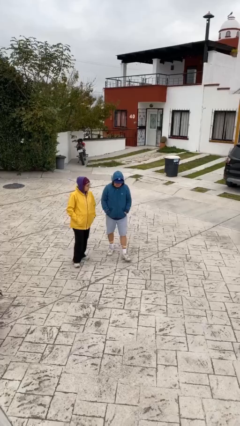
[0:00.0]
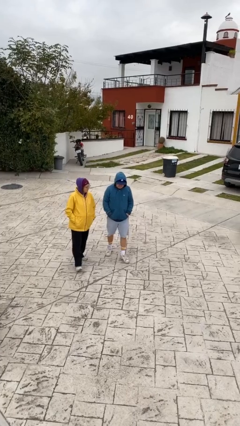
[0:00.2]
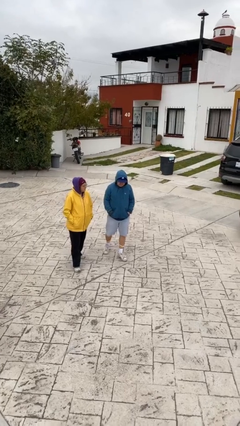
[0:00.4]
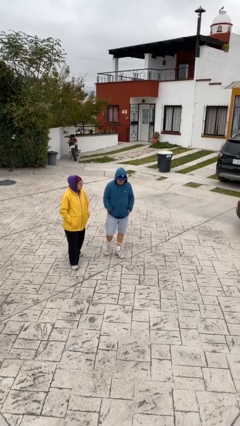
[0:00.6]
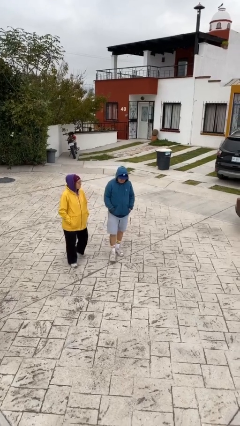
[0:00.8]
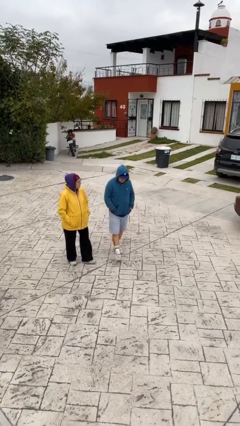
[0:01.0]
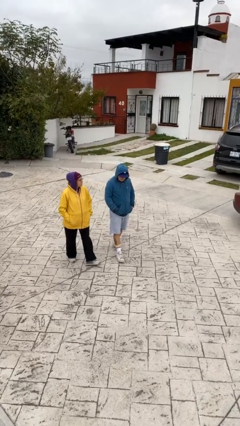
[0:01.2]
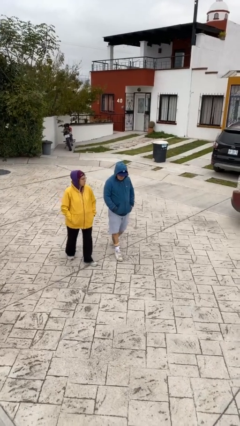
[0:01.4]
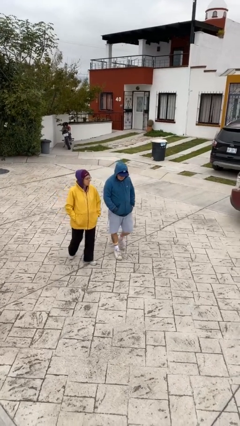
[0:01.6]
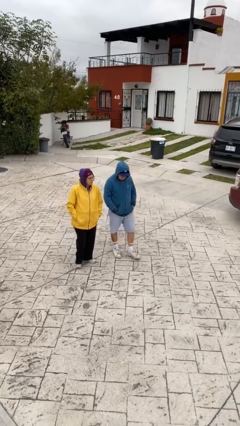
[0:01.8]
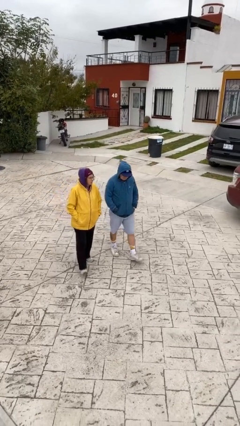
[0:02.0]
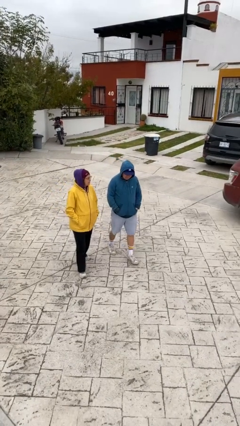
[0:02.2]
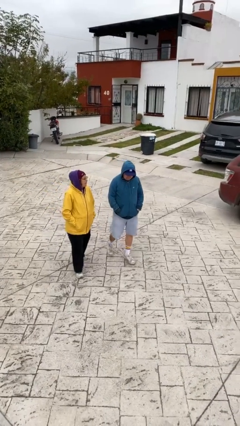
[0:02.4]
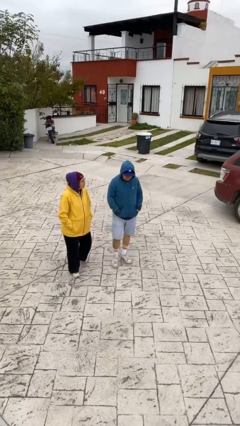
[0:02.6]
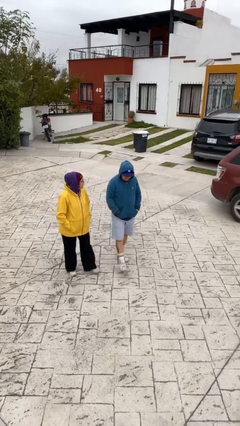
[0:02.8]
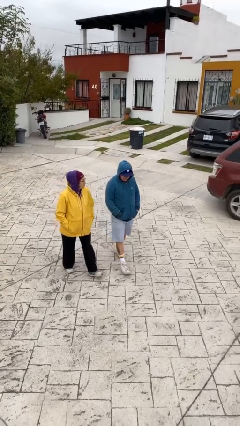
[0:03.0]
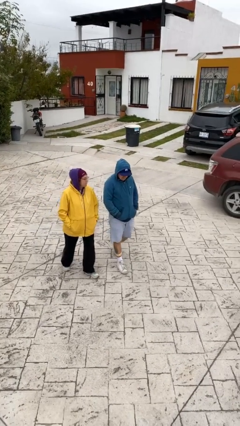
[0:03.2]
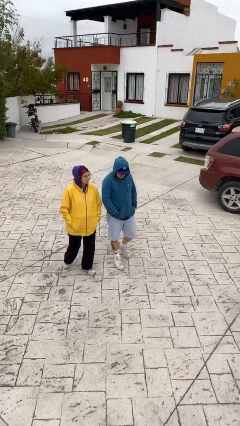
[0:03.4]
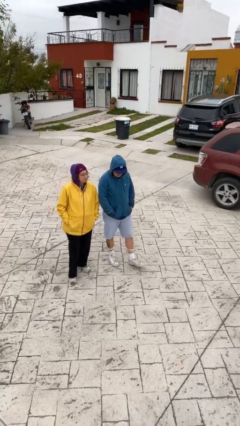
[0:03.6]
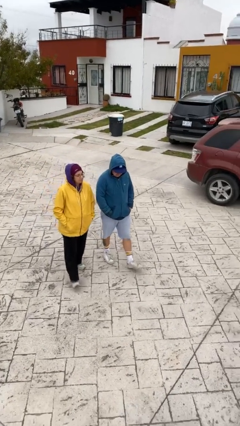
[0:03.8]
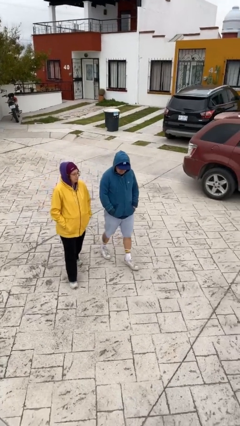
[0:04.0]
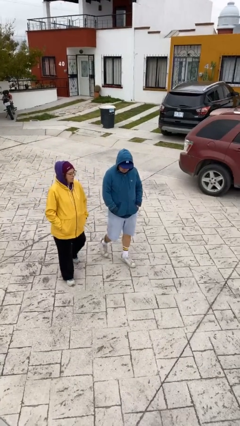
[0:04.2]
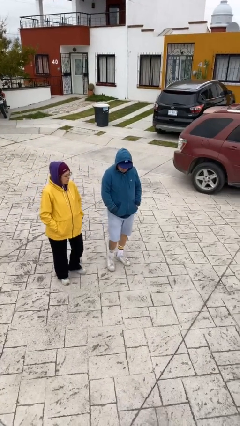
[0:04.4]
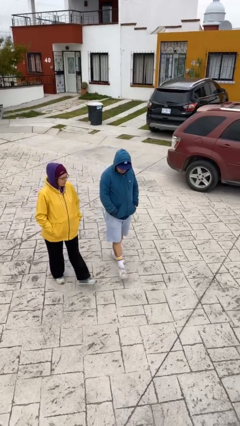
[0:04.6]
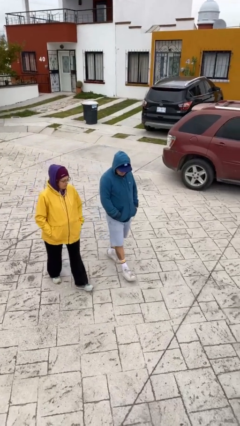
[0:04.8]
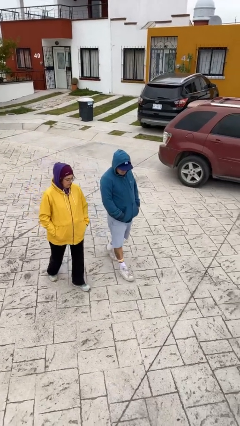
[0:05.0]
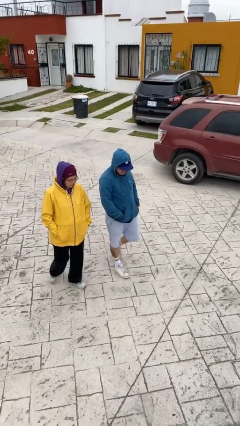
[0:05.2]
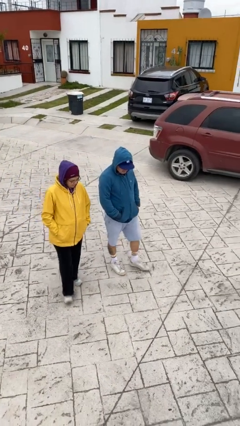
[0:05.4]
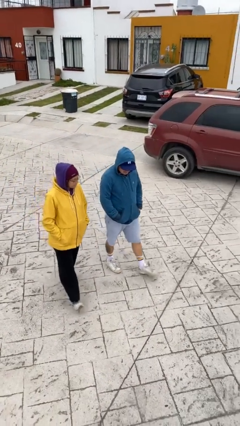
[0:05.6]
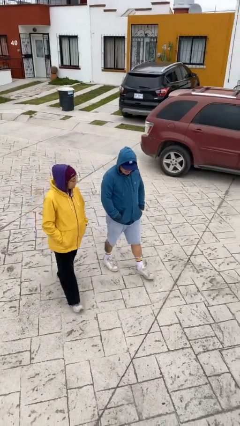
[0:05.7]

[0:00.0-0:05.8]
person talks to person

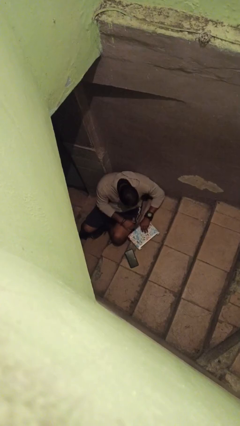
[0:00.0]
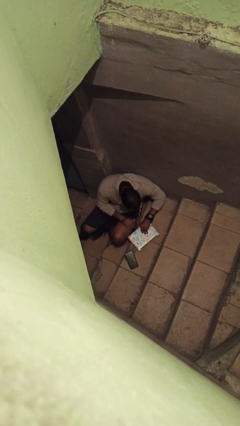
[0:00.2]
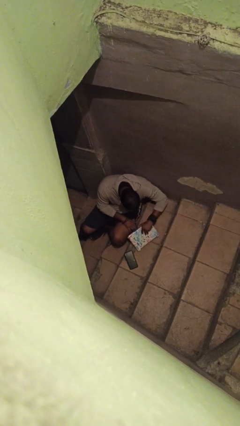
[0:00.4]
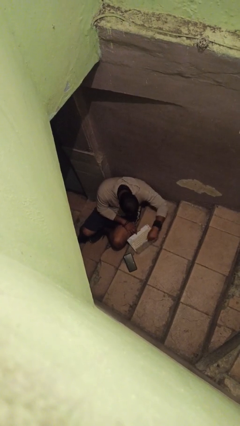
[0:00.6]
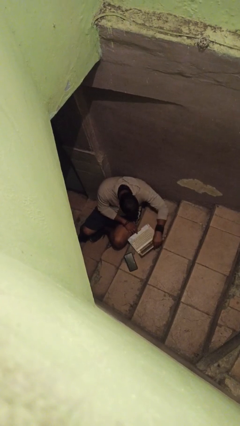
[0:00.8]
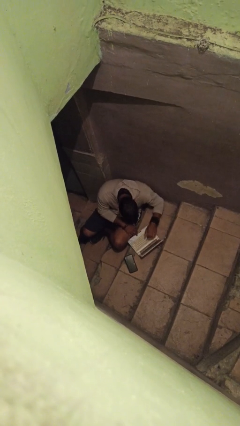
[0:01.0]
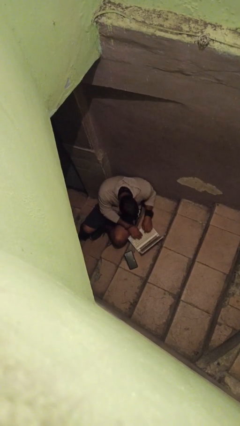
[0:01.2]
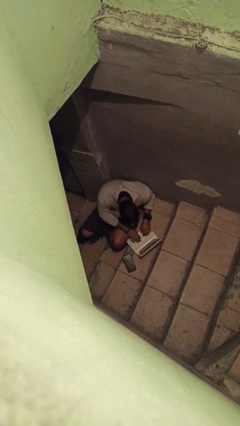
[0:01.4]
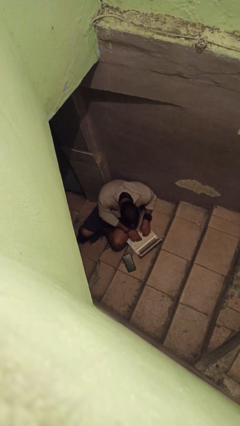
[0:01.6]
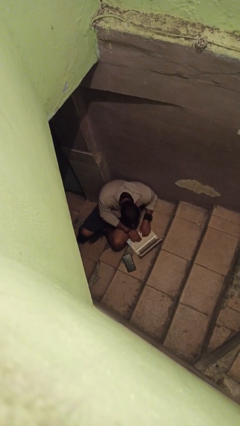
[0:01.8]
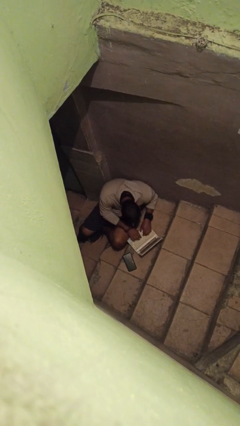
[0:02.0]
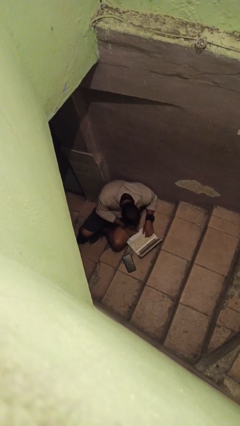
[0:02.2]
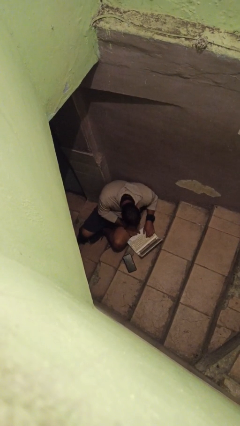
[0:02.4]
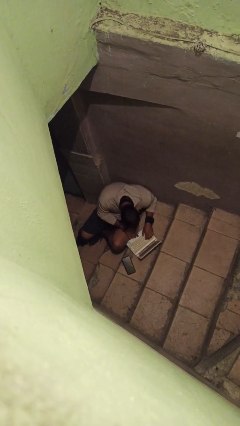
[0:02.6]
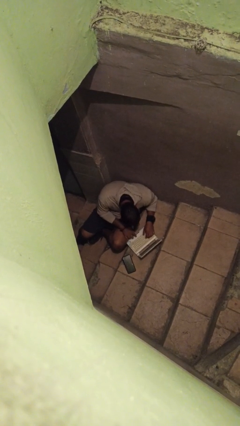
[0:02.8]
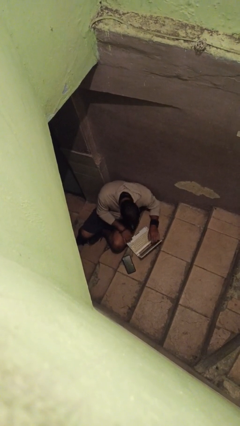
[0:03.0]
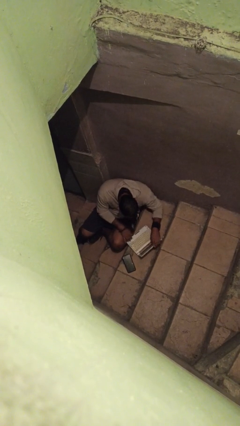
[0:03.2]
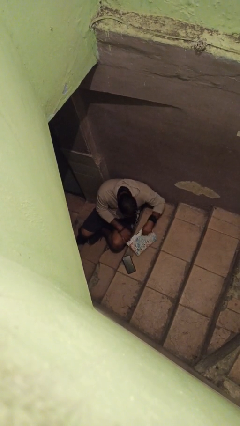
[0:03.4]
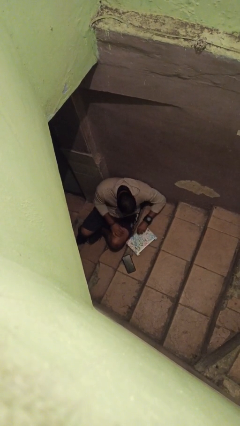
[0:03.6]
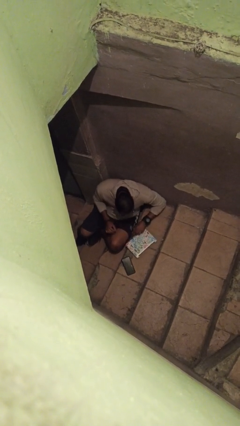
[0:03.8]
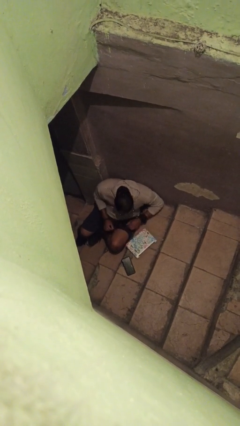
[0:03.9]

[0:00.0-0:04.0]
person interacts with laptop

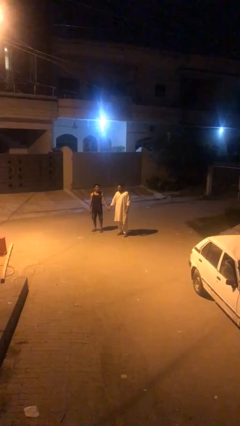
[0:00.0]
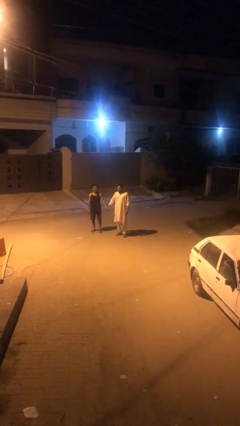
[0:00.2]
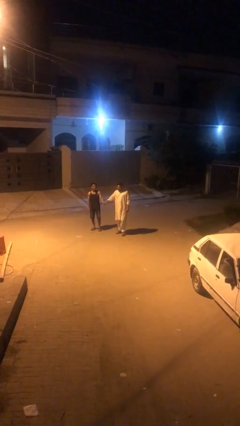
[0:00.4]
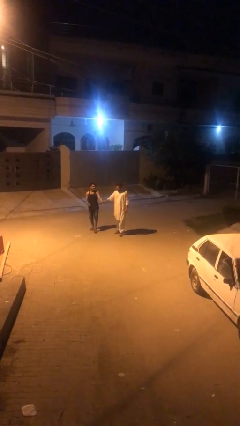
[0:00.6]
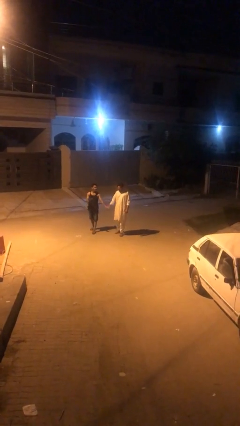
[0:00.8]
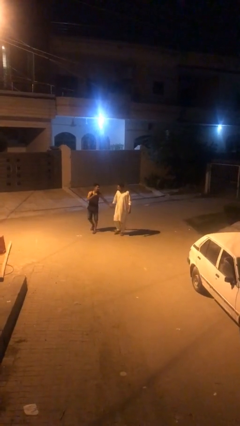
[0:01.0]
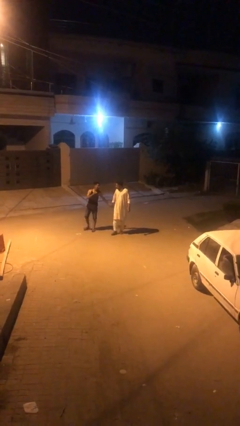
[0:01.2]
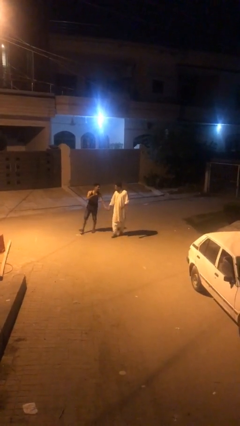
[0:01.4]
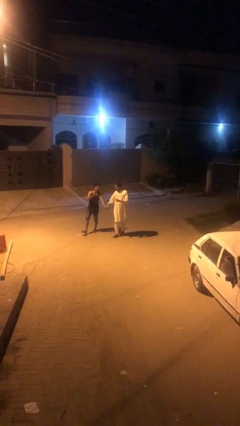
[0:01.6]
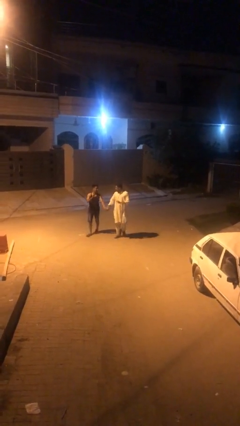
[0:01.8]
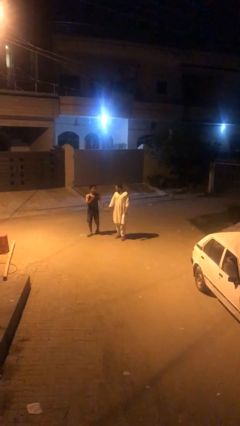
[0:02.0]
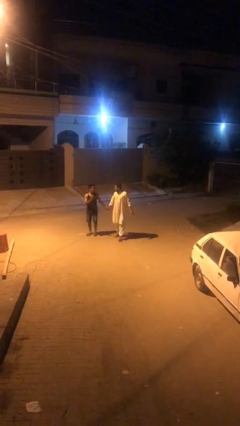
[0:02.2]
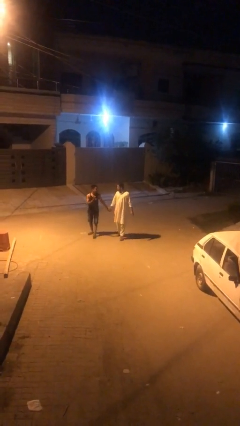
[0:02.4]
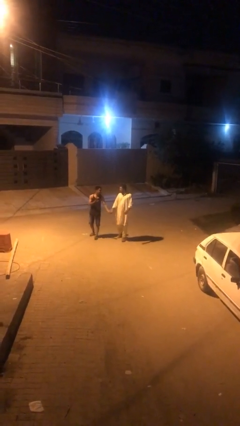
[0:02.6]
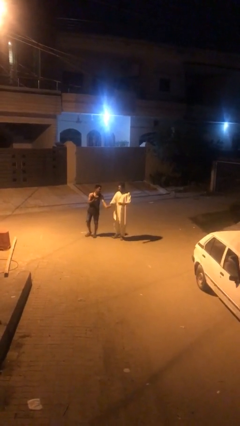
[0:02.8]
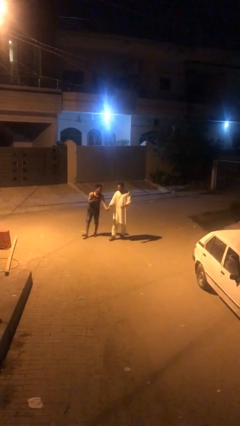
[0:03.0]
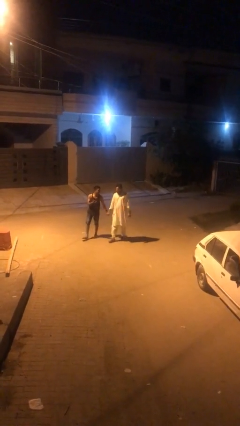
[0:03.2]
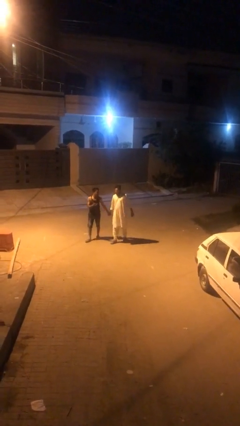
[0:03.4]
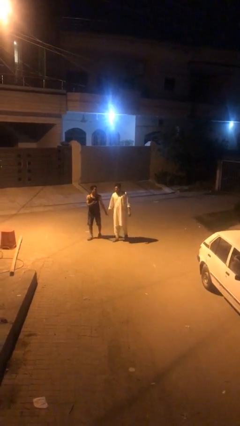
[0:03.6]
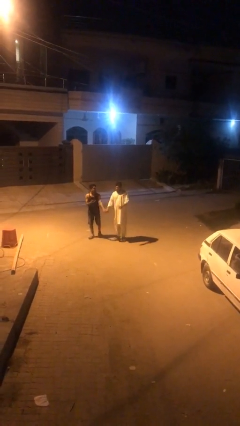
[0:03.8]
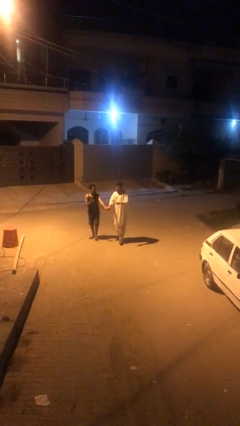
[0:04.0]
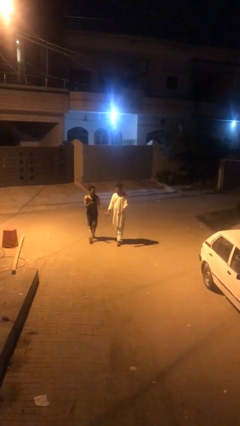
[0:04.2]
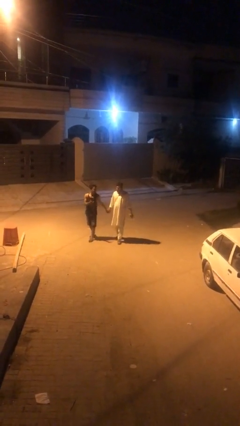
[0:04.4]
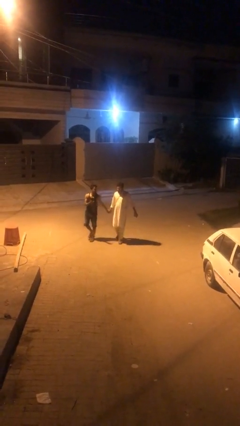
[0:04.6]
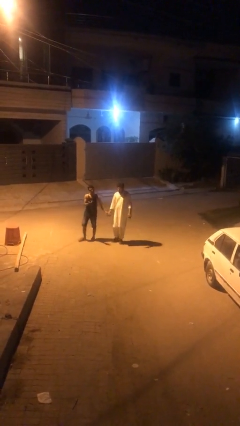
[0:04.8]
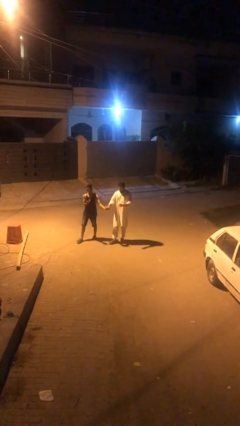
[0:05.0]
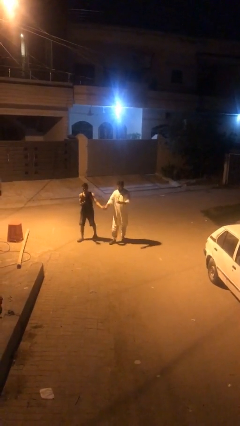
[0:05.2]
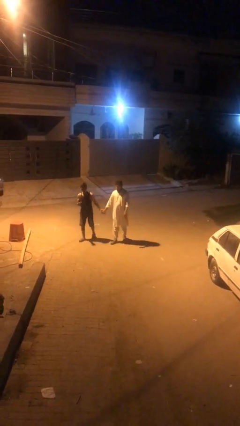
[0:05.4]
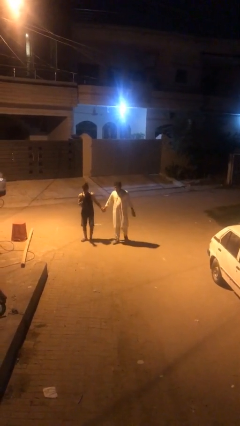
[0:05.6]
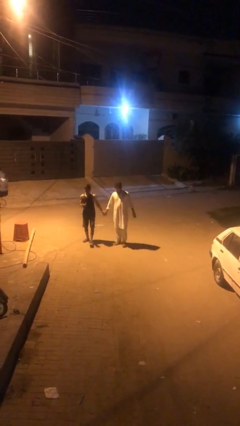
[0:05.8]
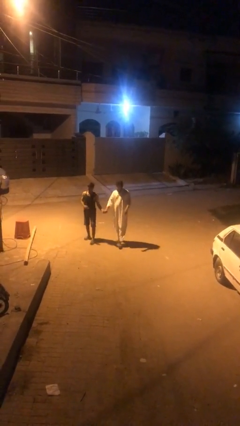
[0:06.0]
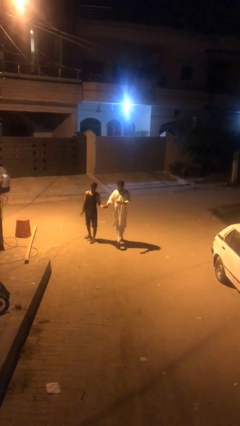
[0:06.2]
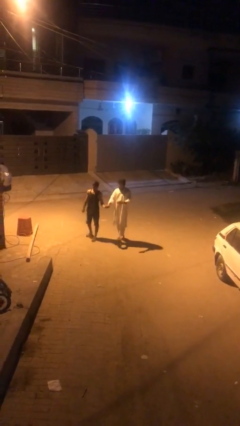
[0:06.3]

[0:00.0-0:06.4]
person holds hand

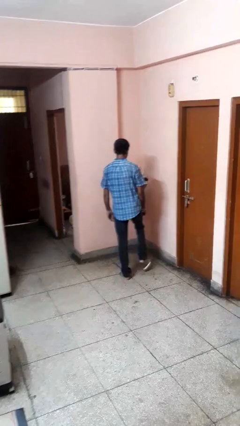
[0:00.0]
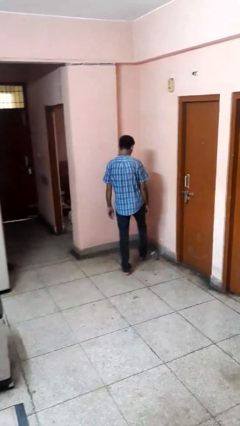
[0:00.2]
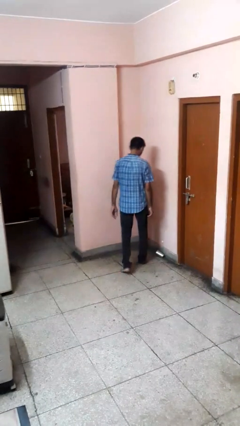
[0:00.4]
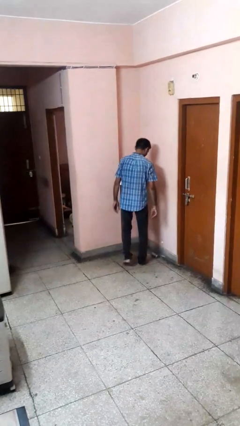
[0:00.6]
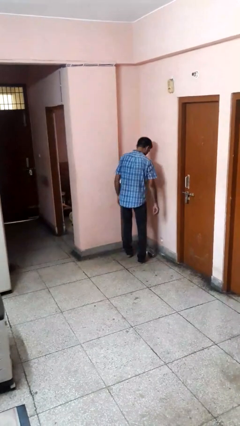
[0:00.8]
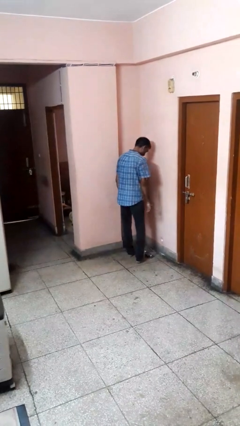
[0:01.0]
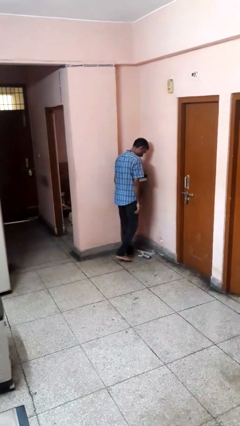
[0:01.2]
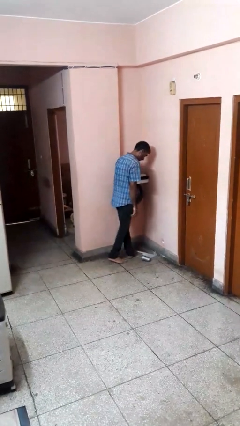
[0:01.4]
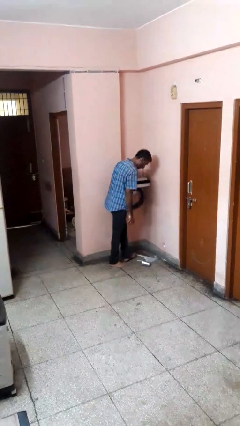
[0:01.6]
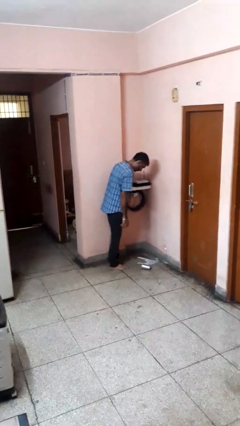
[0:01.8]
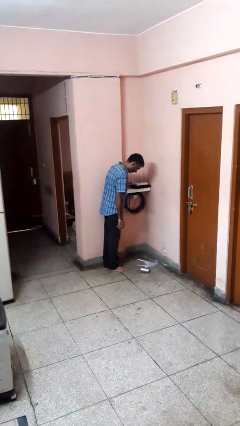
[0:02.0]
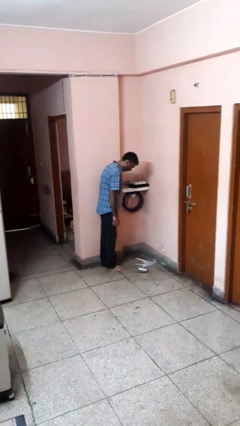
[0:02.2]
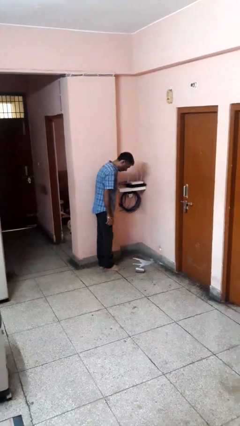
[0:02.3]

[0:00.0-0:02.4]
person spills on floor
